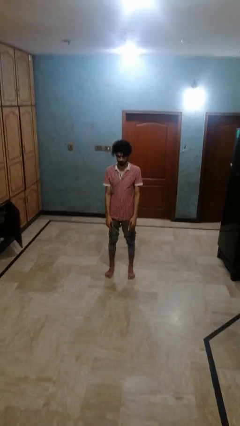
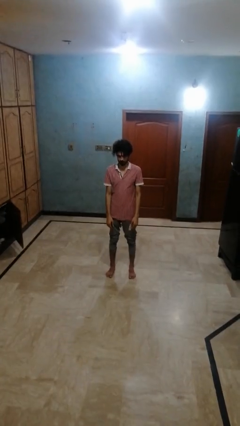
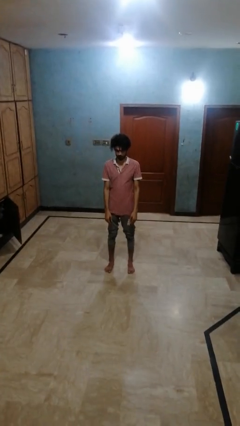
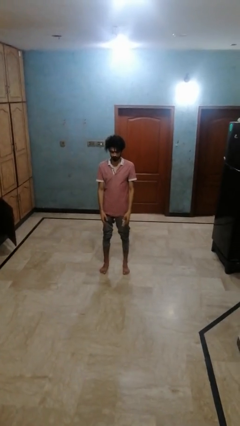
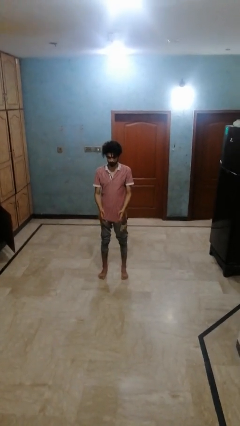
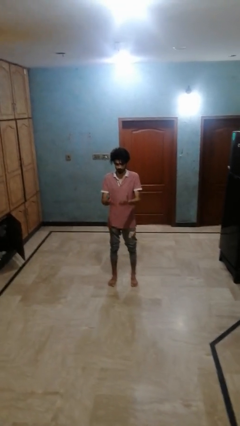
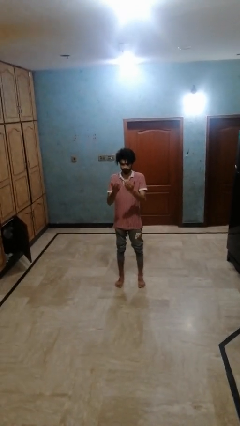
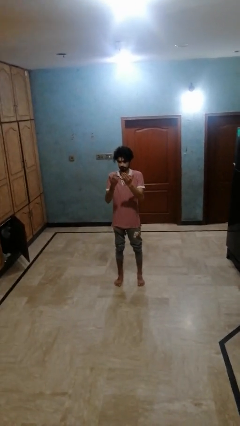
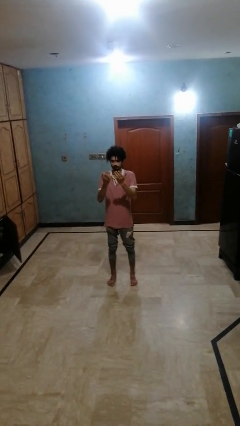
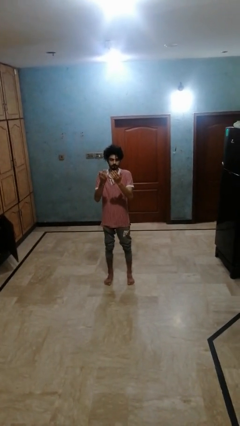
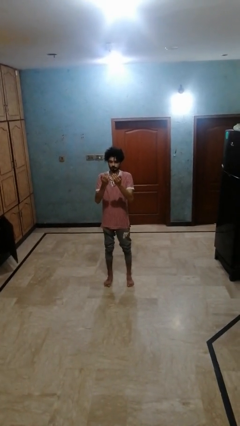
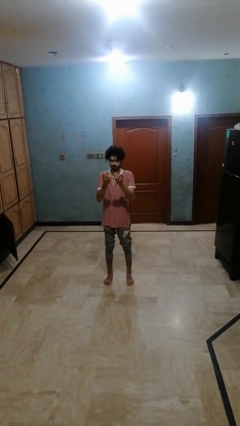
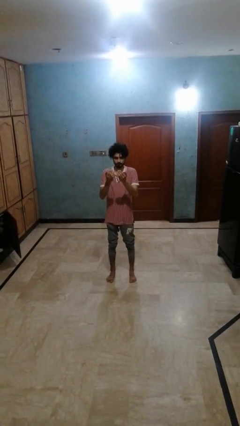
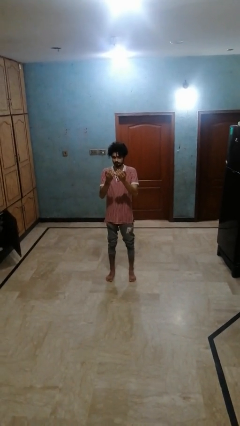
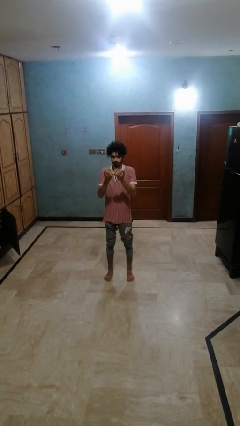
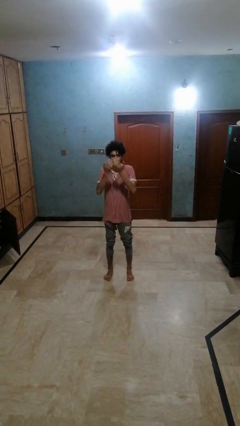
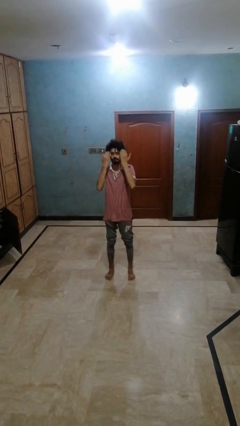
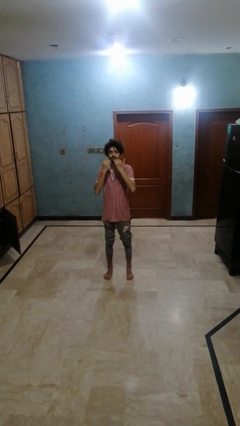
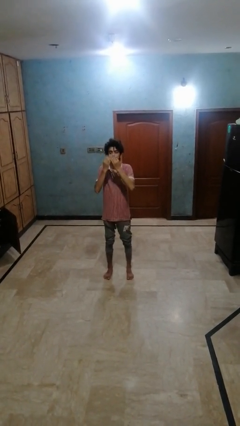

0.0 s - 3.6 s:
person prays

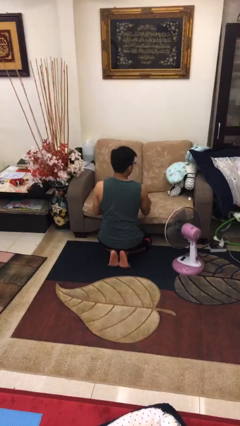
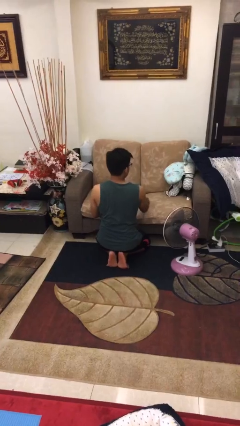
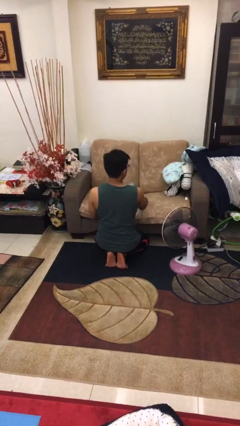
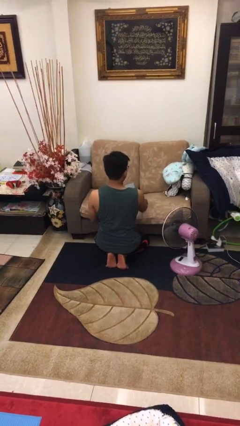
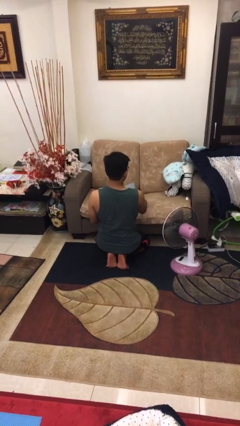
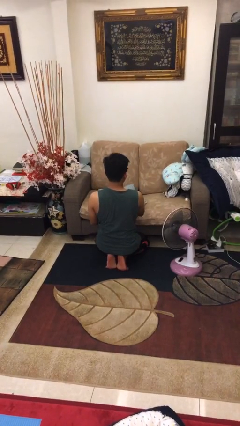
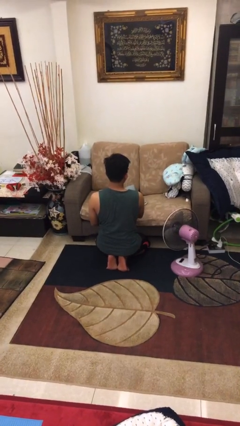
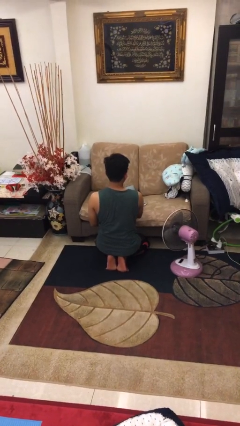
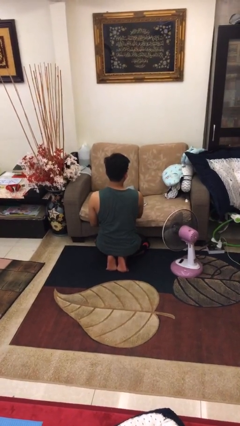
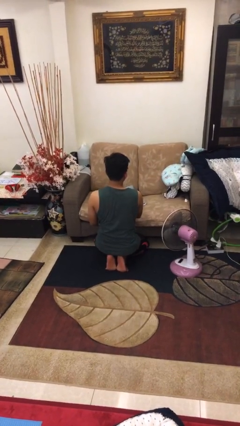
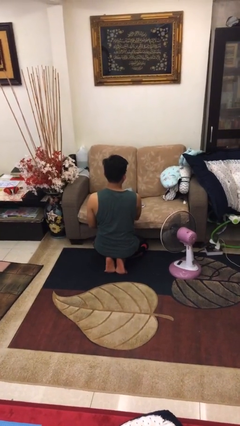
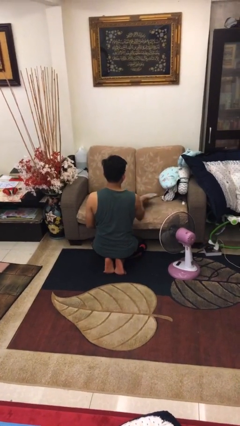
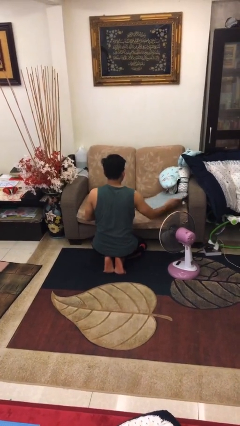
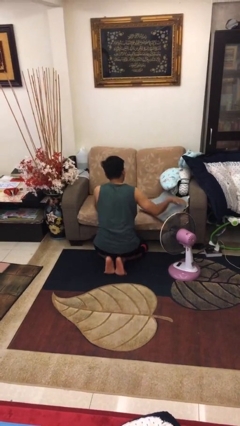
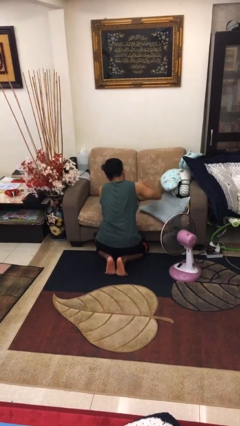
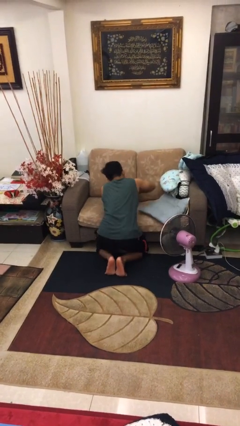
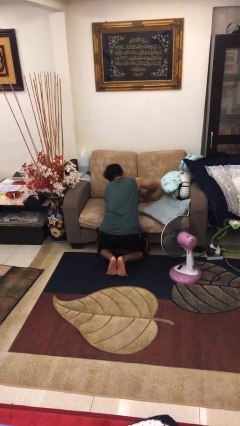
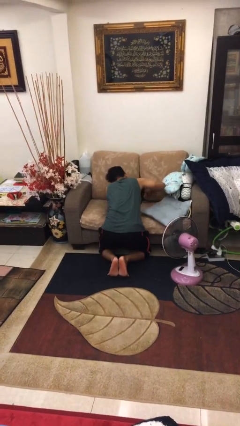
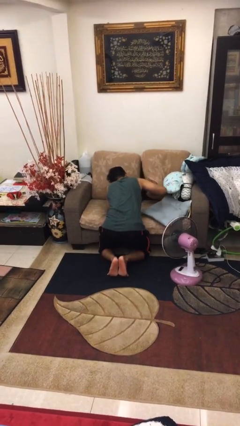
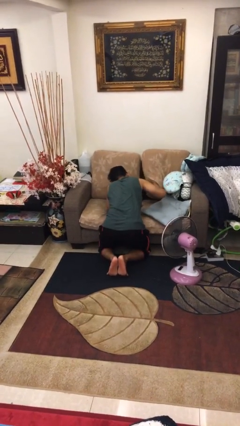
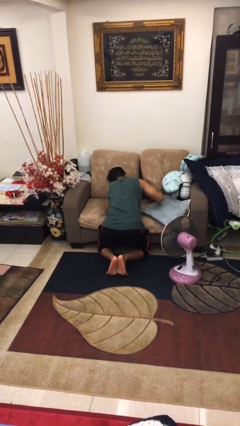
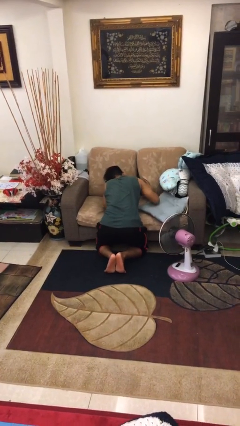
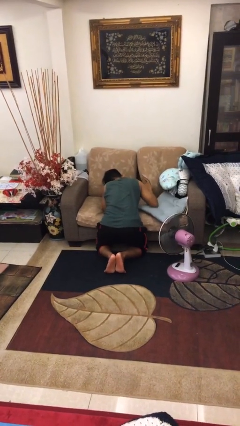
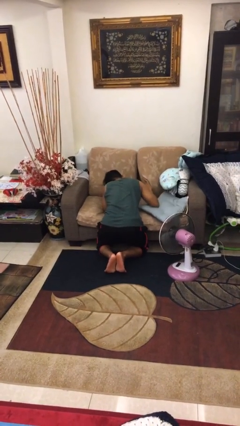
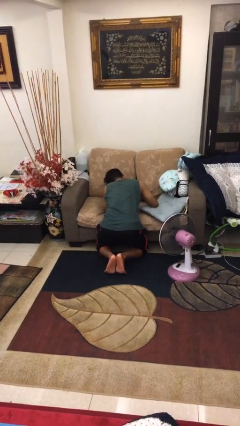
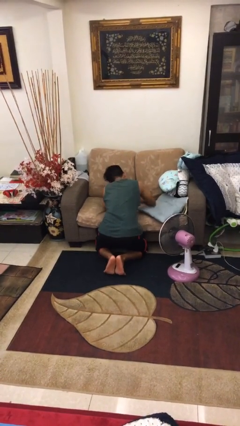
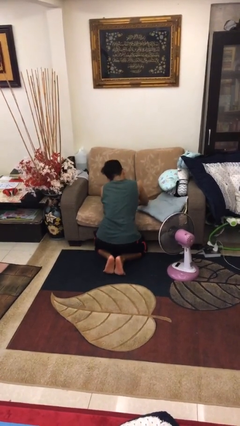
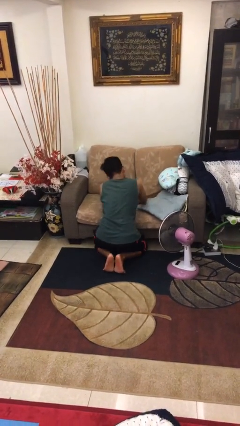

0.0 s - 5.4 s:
person searches in couch

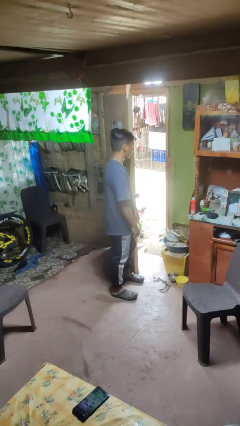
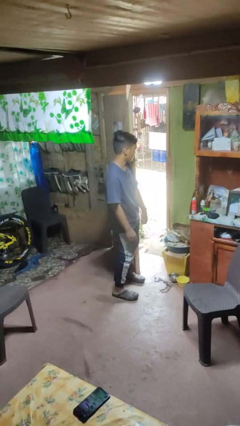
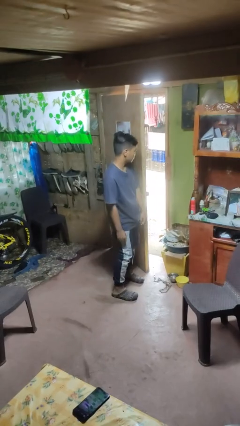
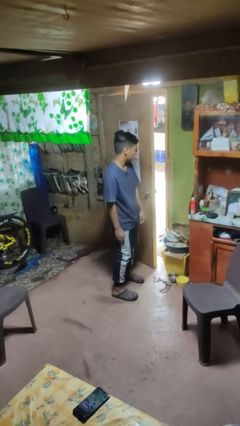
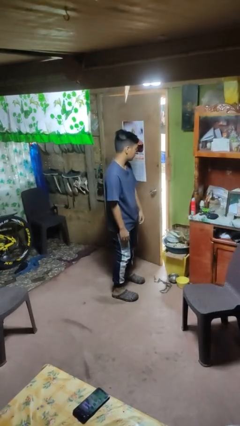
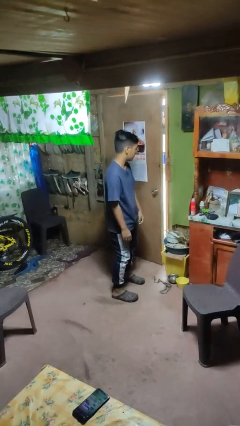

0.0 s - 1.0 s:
person closes door with hip

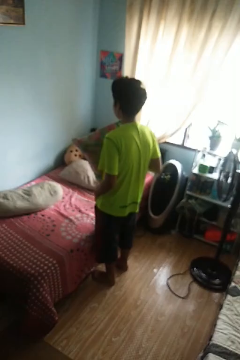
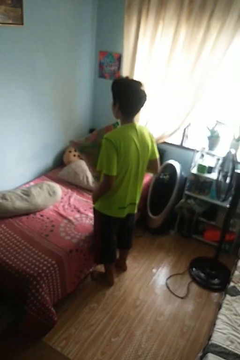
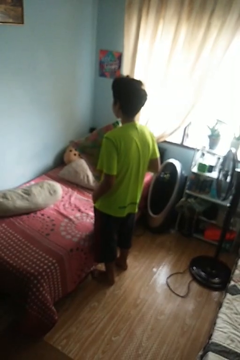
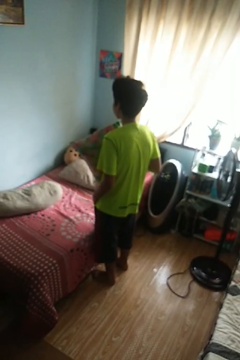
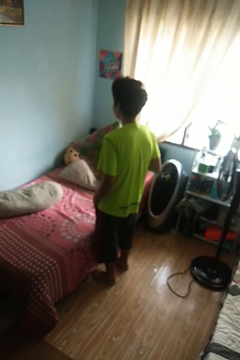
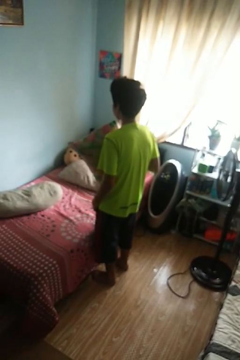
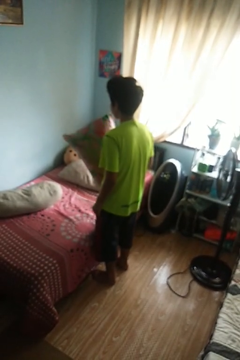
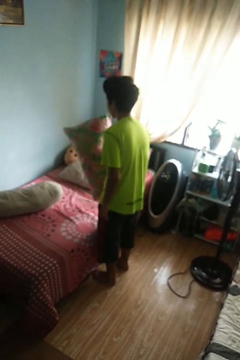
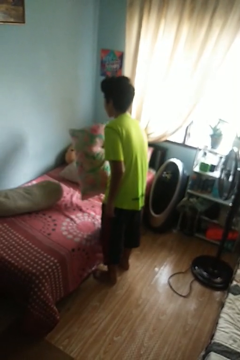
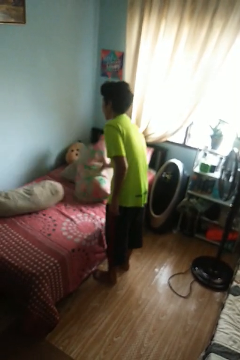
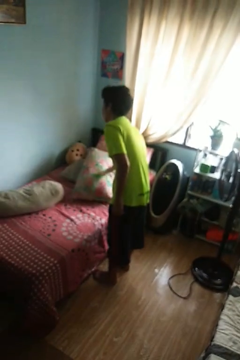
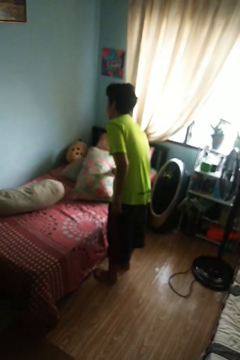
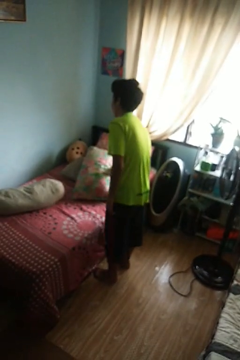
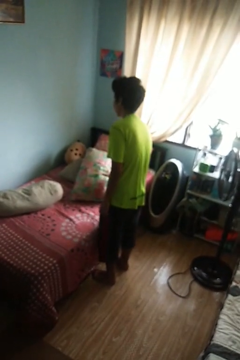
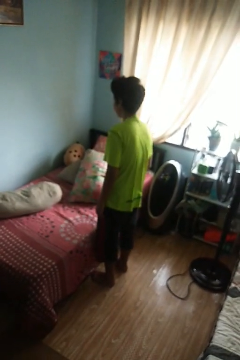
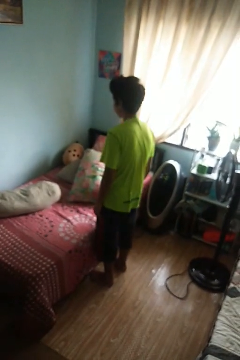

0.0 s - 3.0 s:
person puts down object on bed

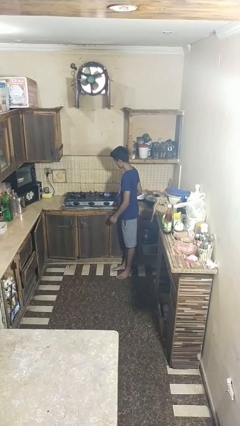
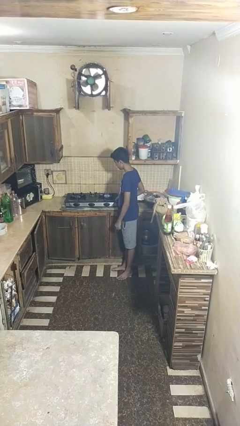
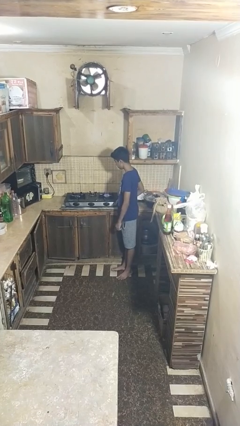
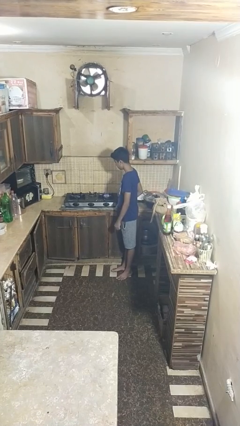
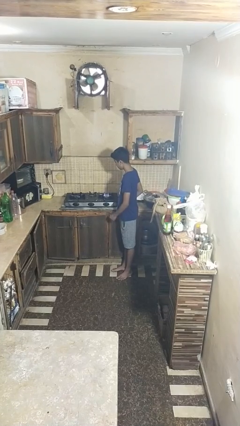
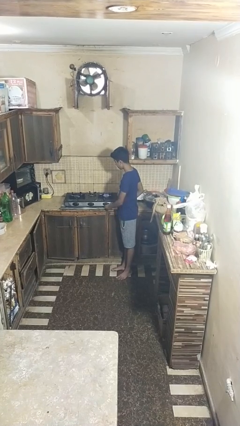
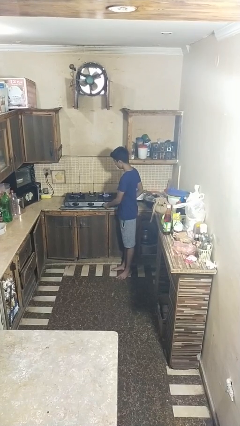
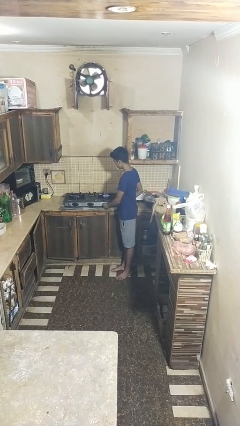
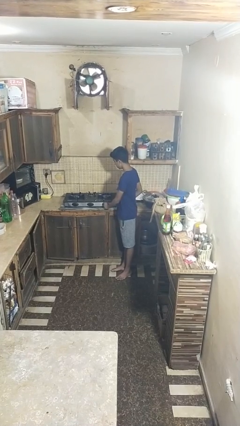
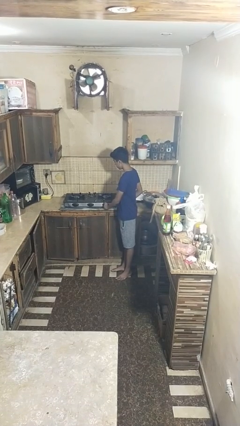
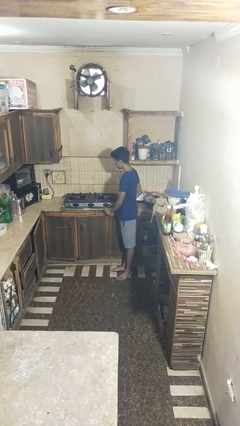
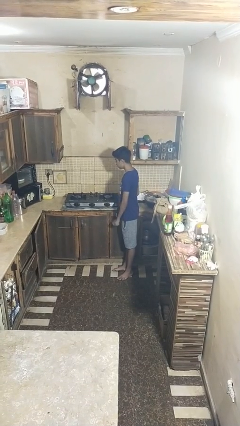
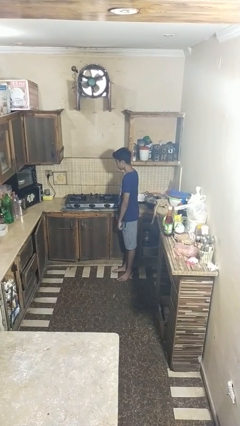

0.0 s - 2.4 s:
person turns off stovetop

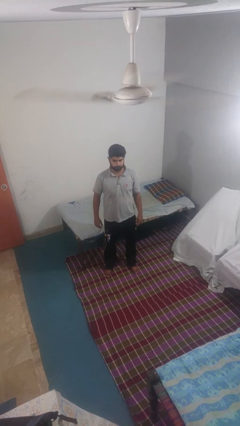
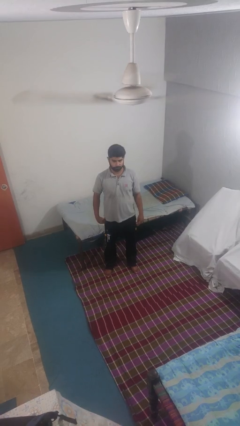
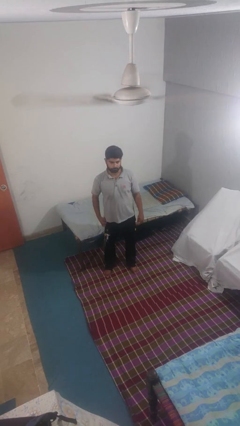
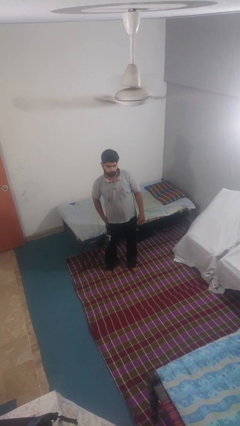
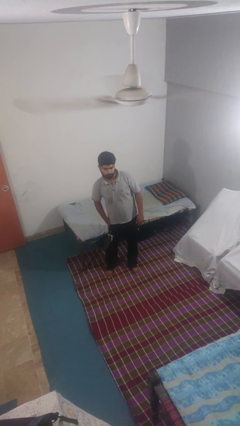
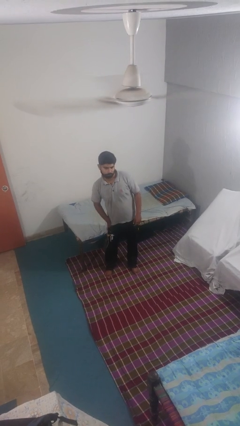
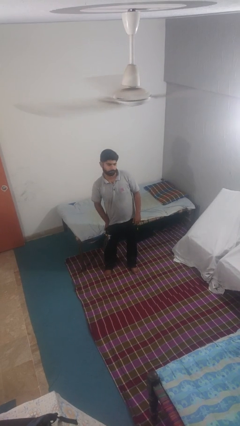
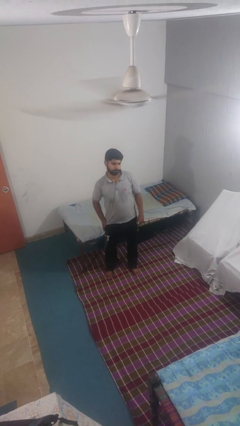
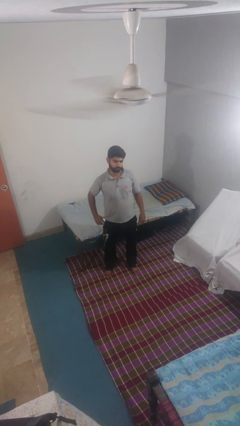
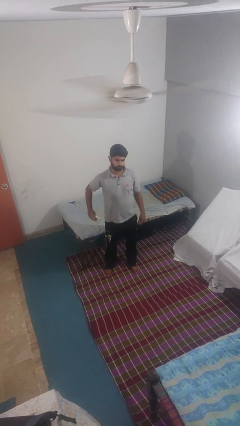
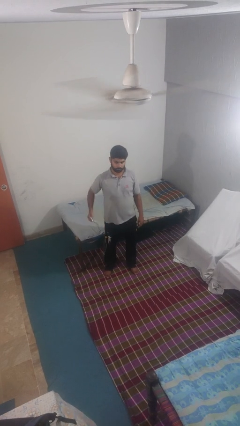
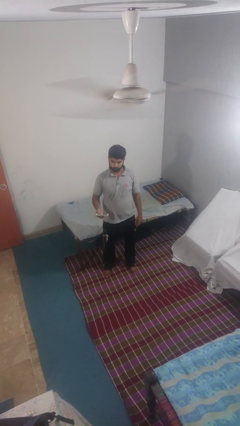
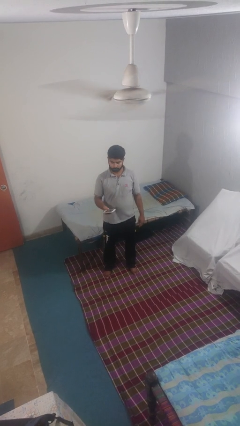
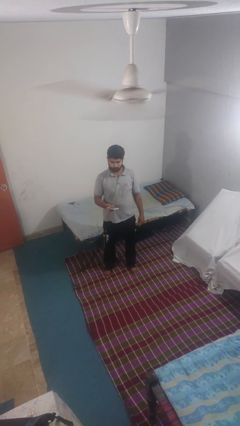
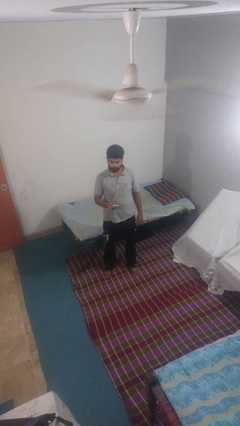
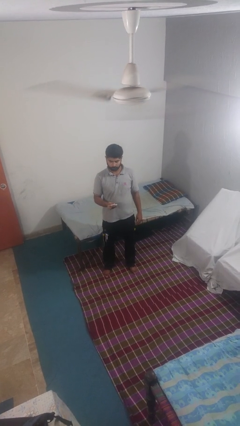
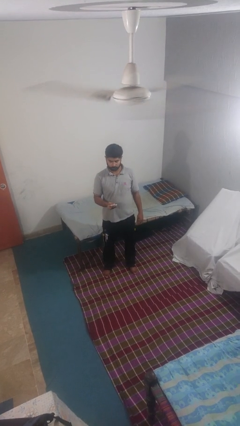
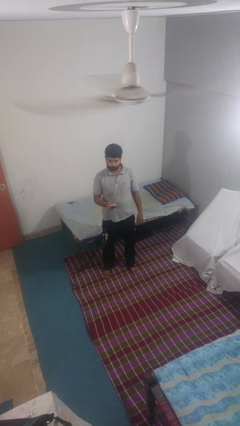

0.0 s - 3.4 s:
person takes phone from pocket
